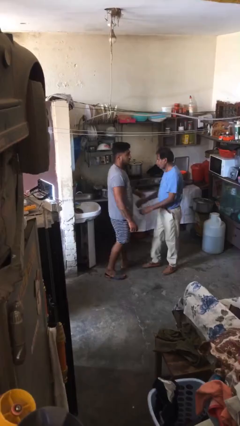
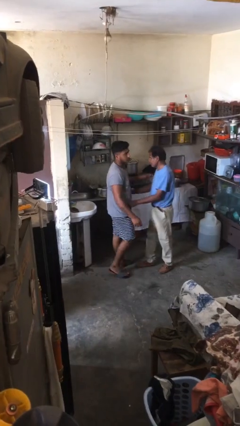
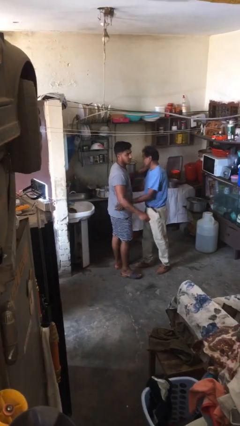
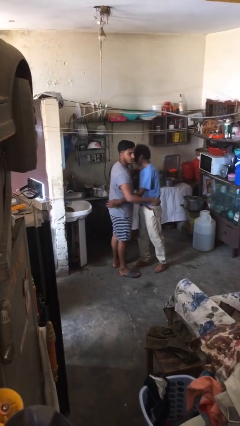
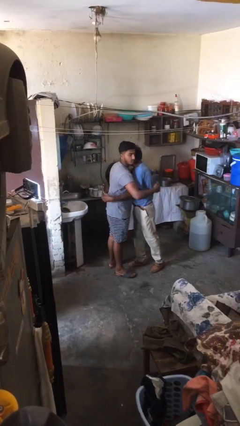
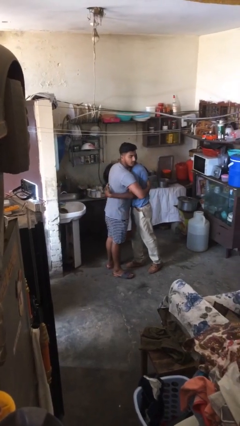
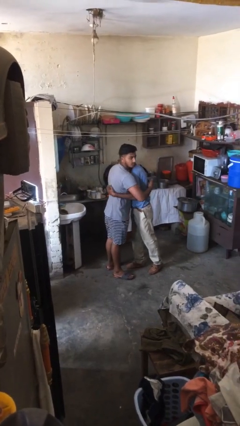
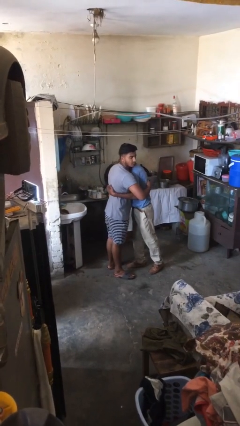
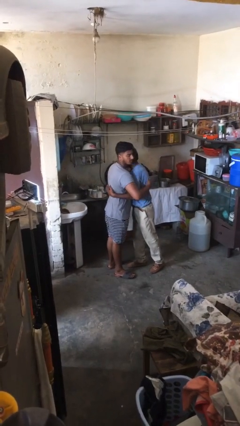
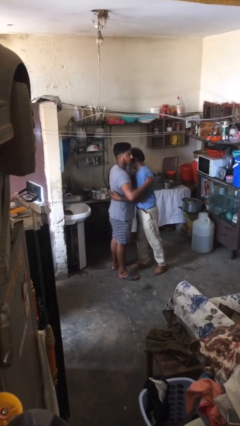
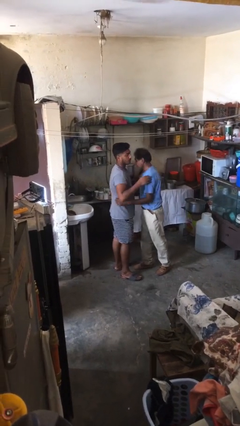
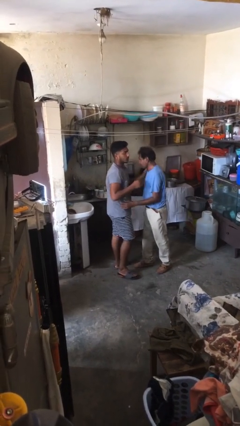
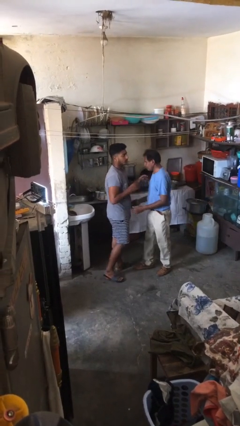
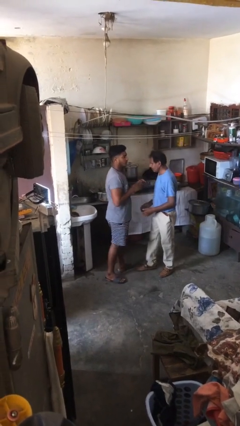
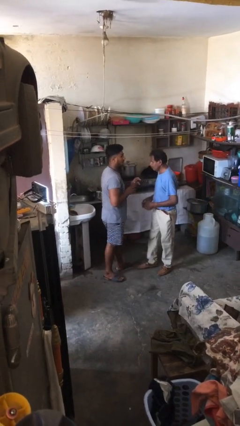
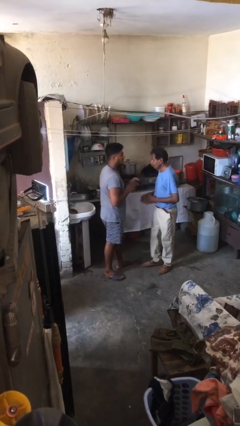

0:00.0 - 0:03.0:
person embraces person

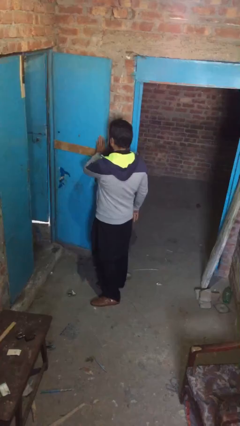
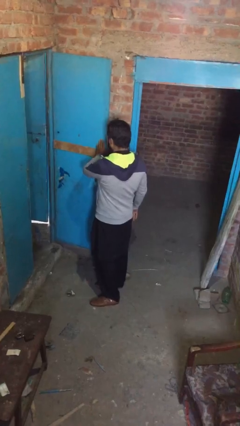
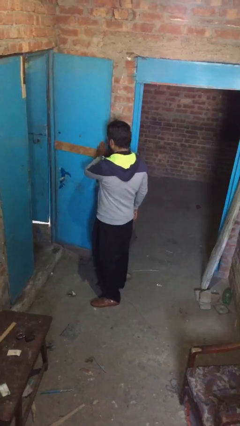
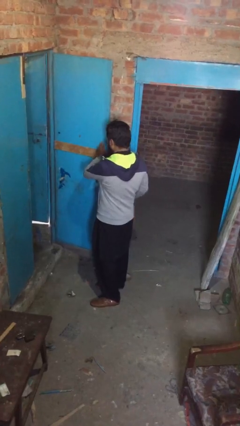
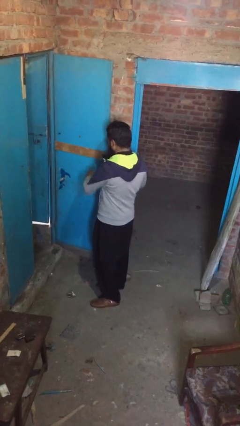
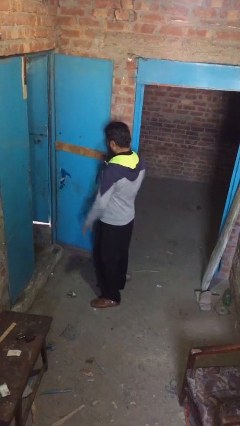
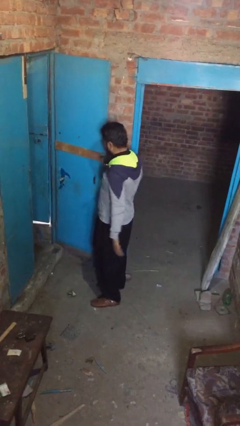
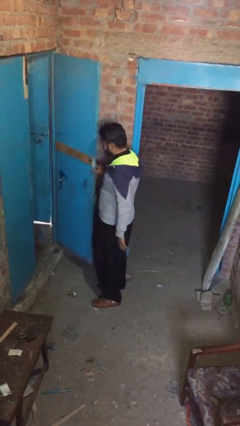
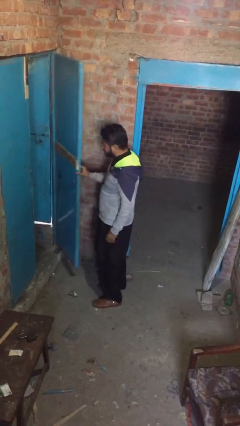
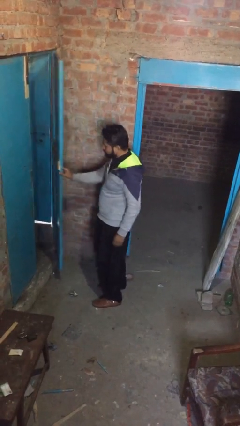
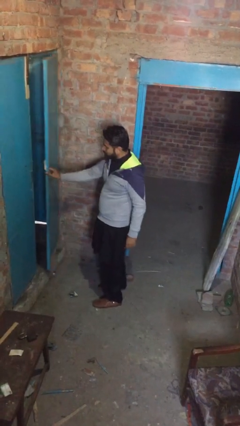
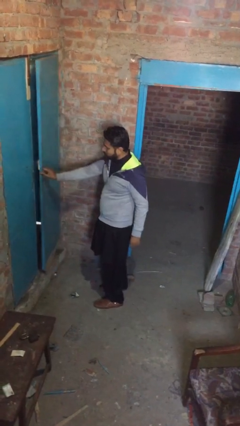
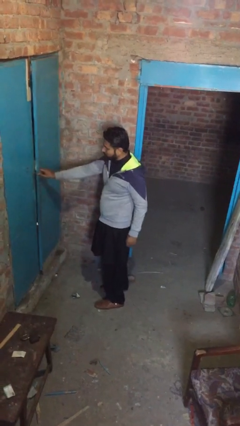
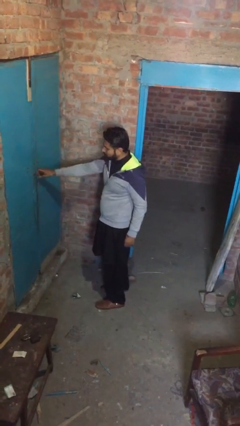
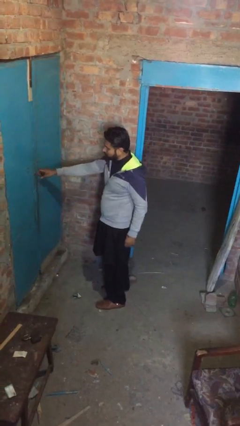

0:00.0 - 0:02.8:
person closes facility door

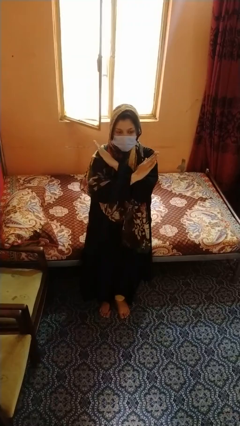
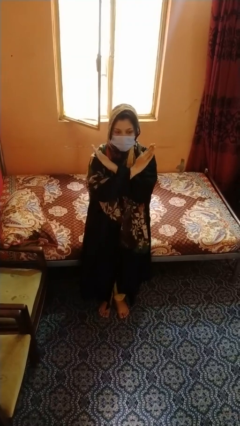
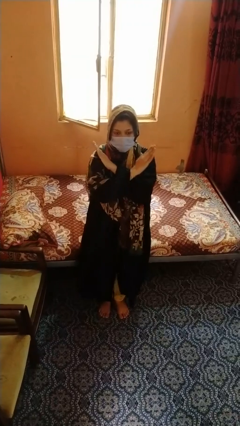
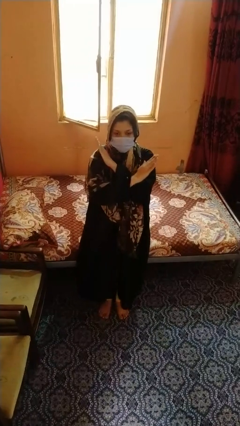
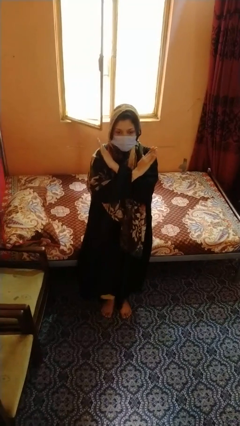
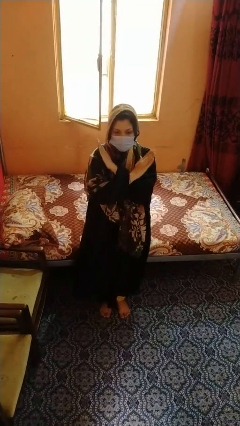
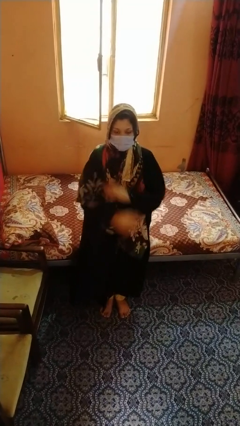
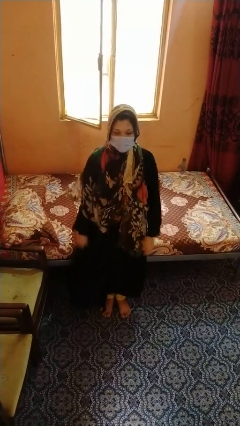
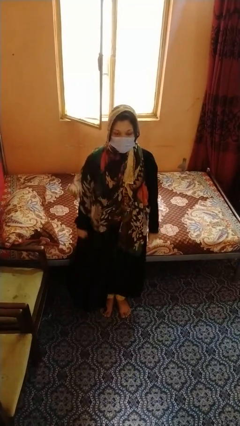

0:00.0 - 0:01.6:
person gestures arms x

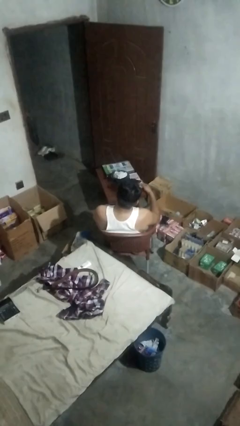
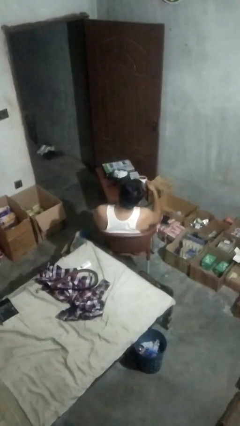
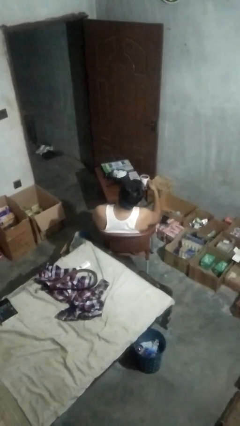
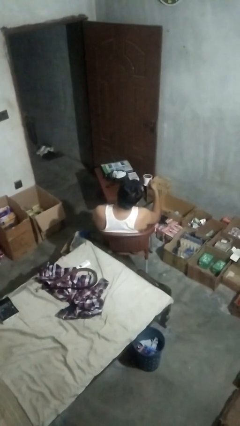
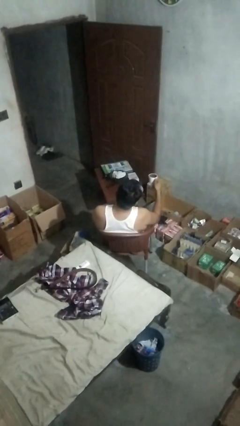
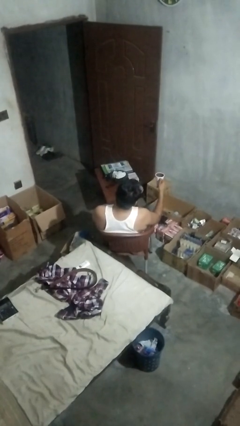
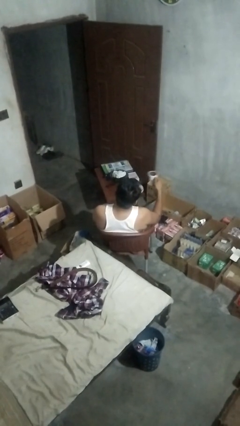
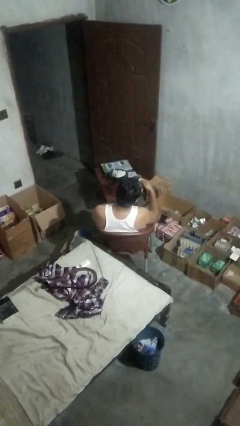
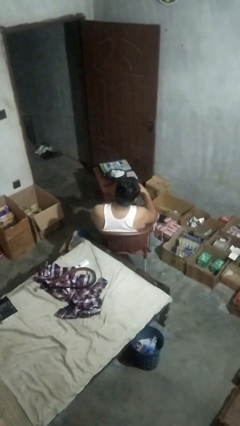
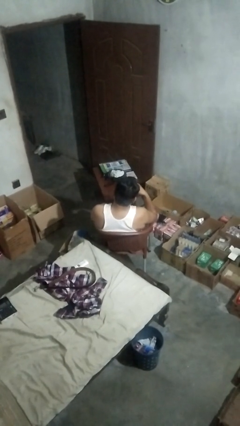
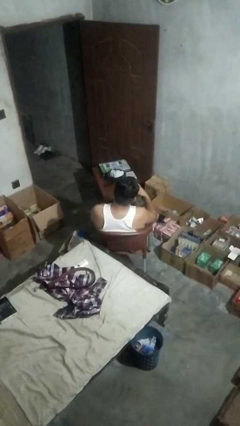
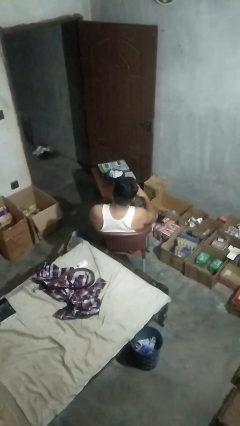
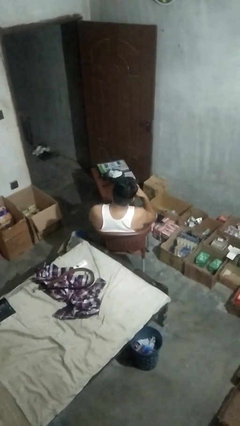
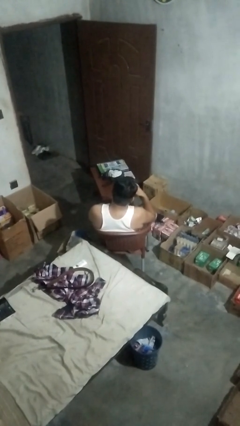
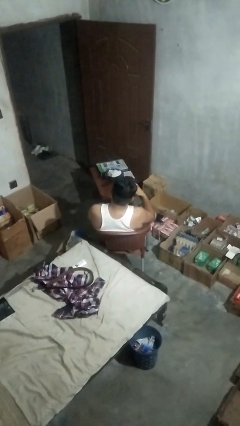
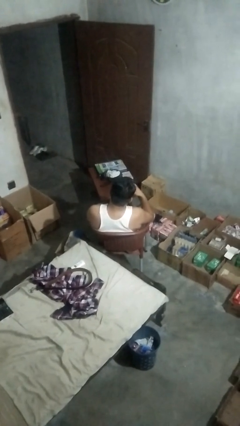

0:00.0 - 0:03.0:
person drinks from mug

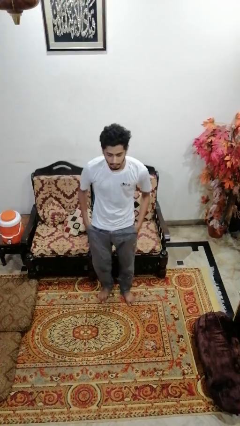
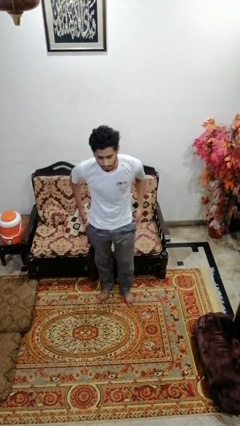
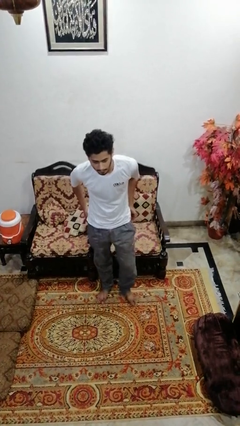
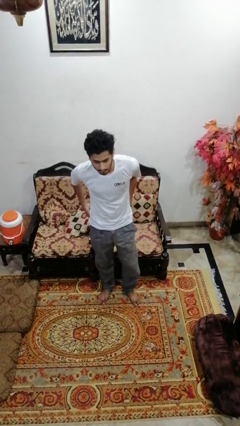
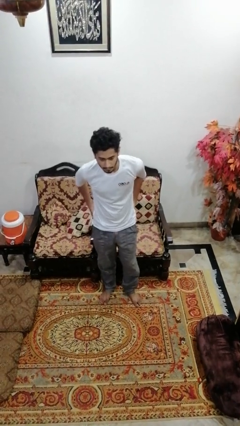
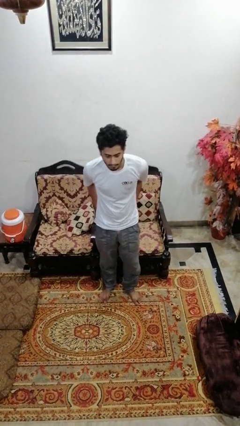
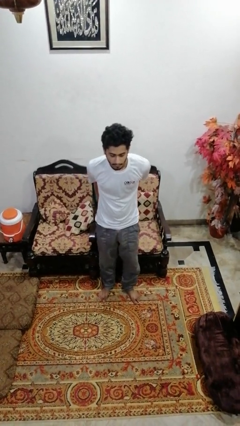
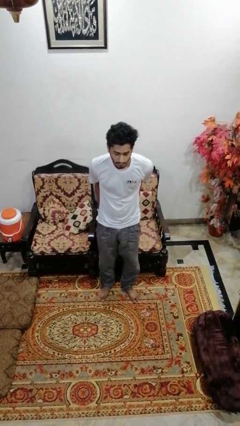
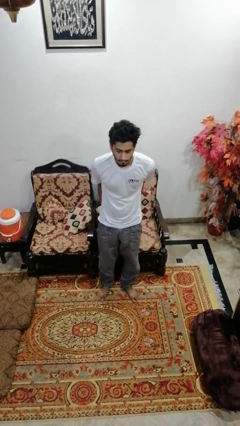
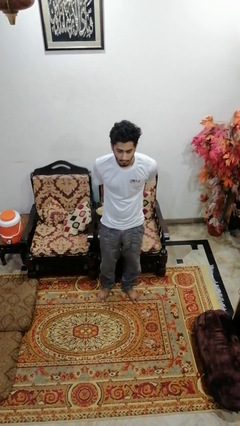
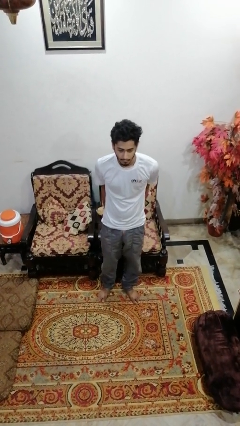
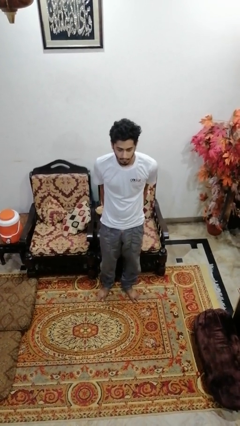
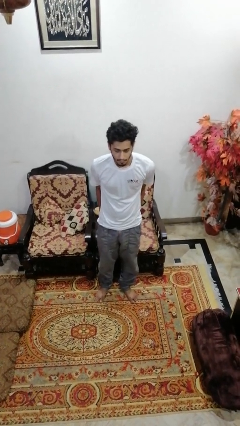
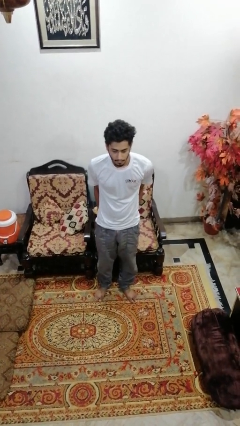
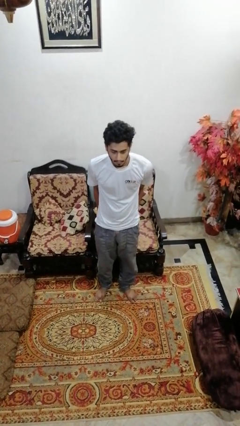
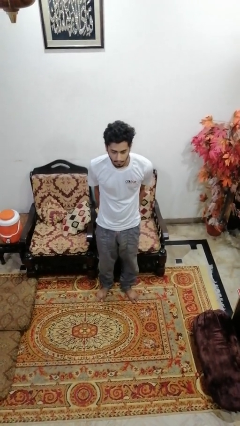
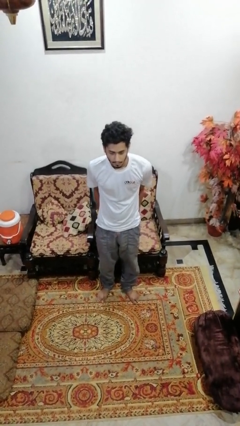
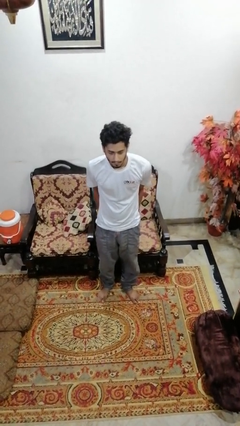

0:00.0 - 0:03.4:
person puts hands in back pockets

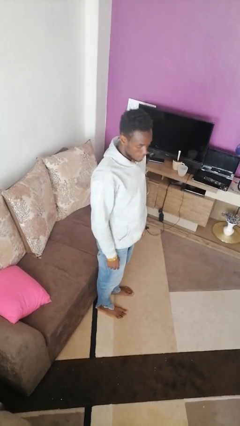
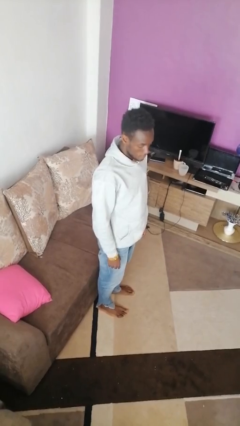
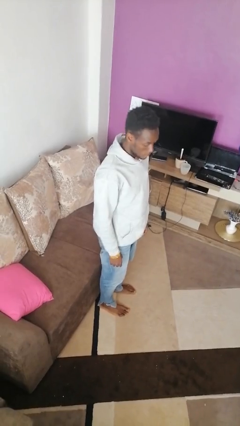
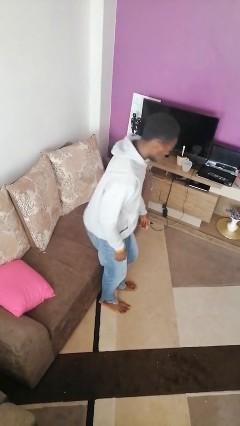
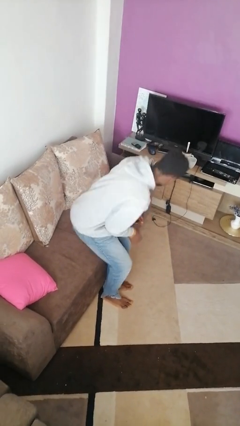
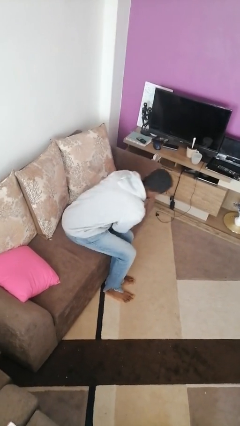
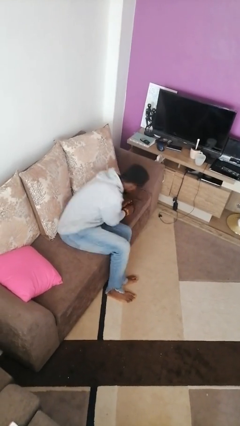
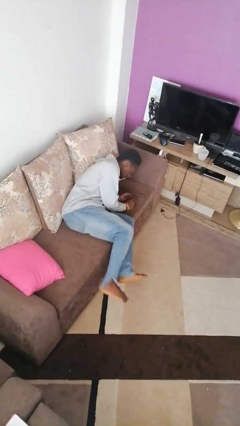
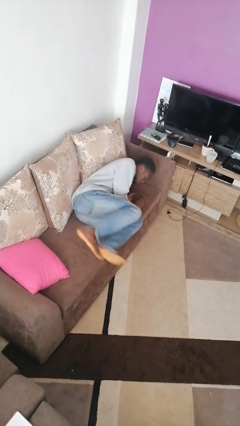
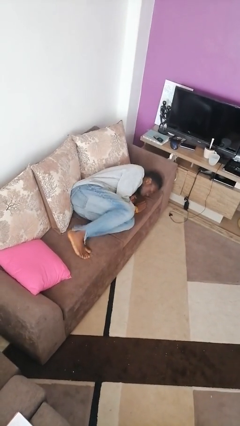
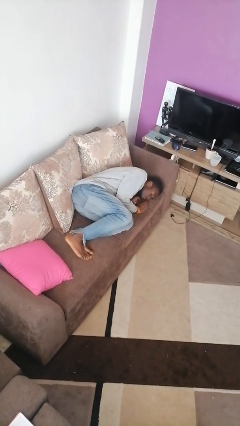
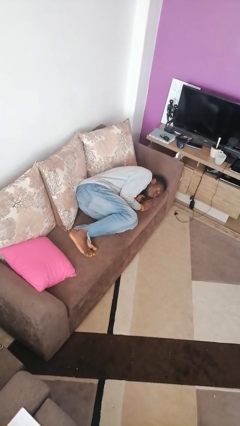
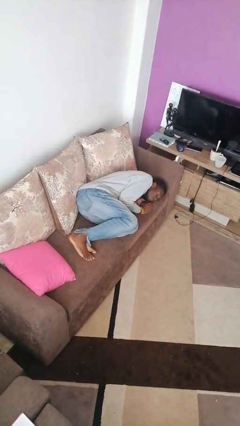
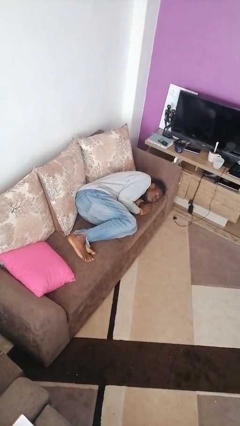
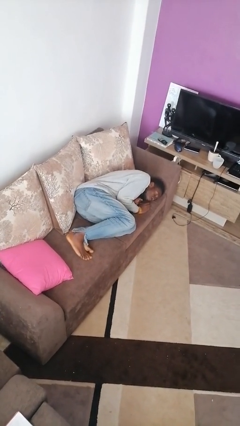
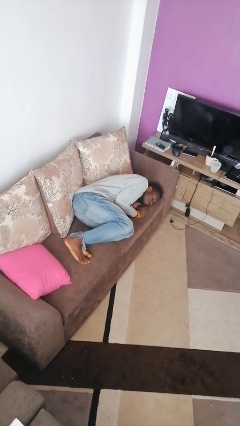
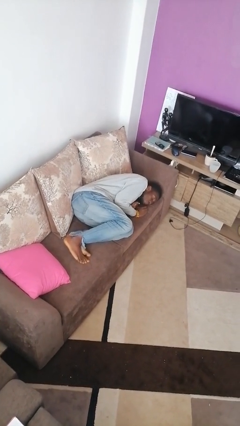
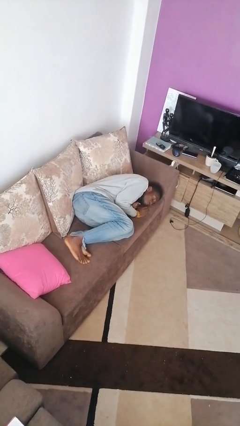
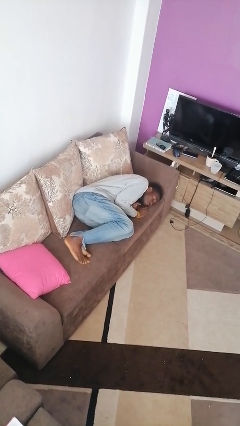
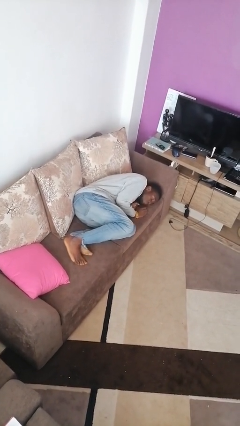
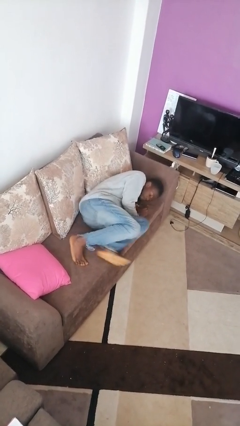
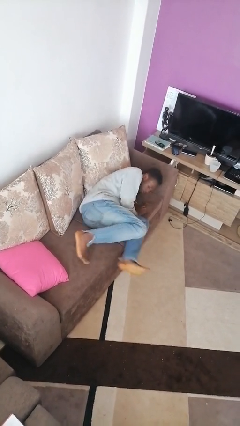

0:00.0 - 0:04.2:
person lies down on couch
